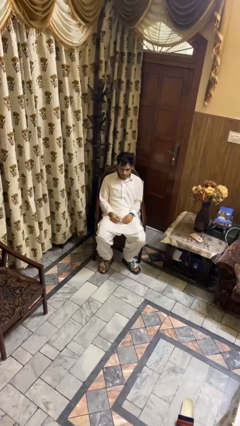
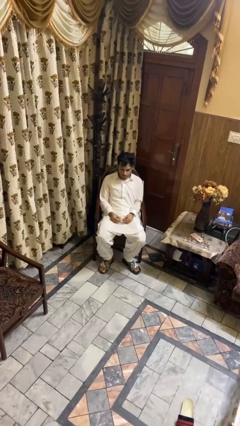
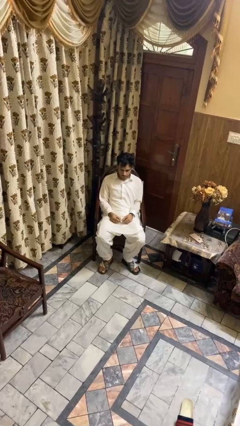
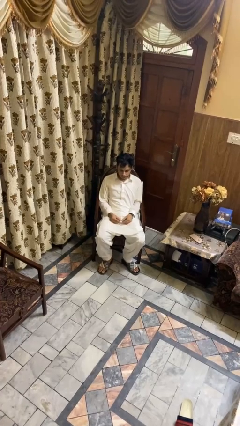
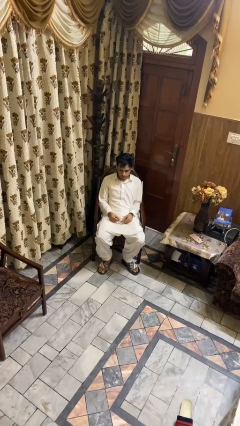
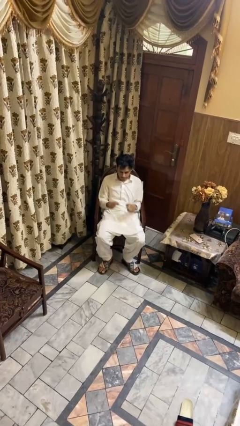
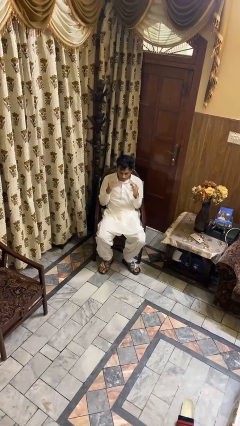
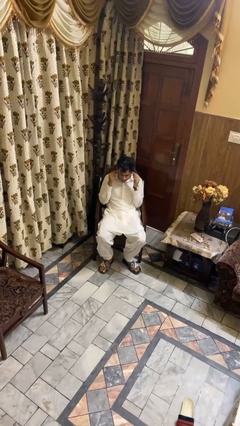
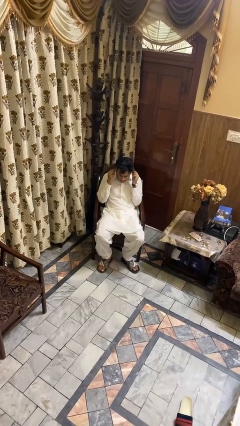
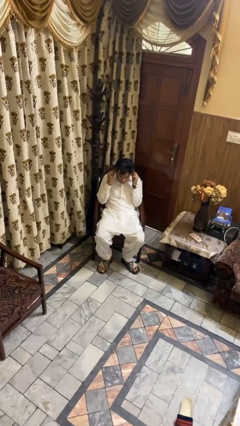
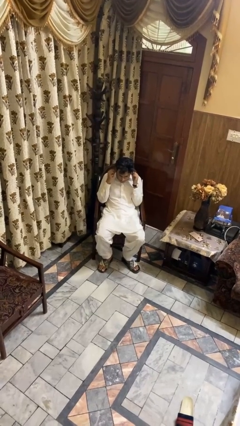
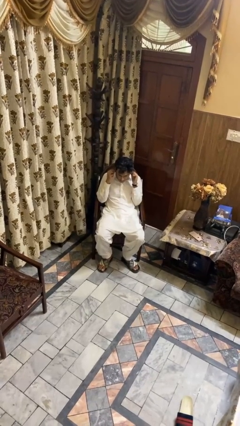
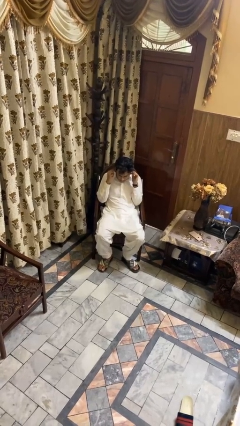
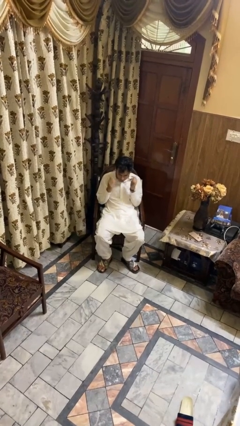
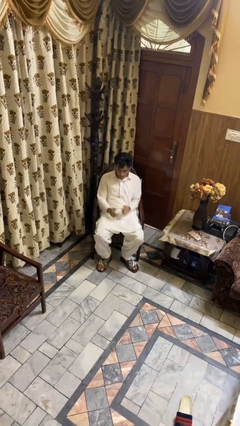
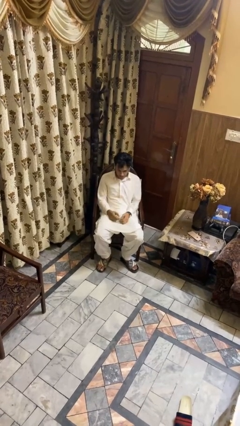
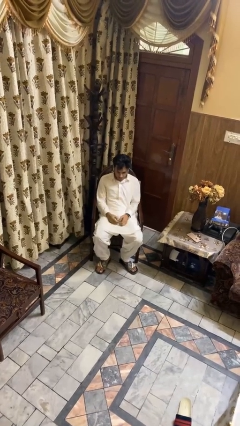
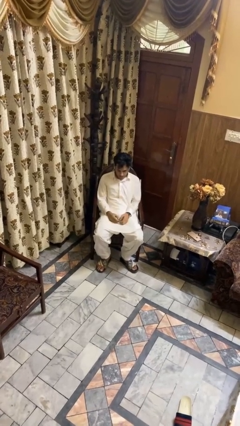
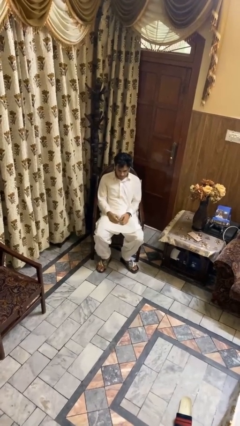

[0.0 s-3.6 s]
person puts on headphones

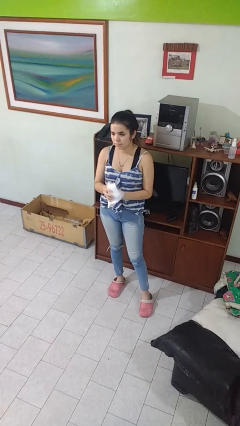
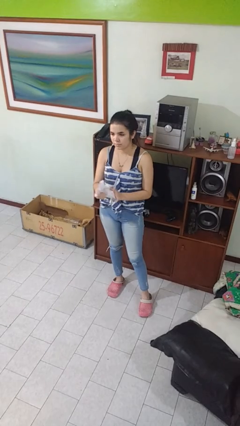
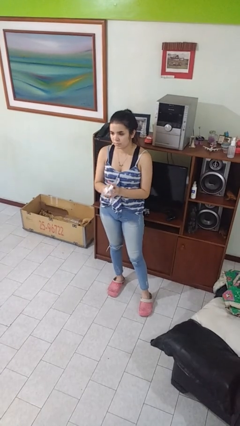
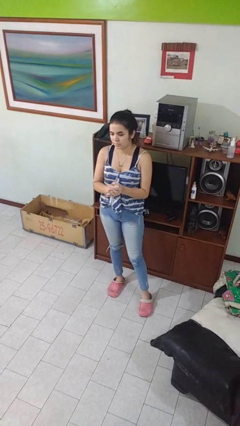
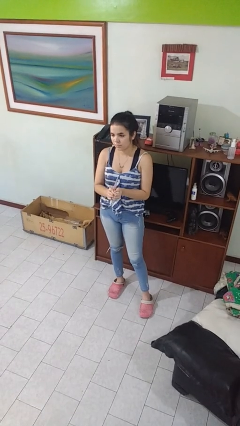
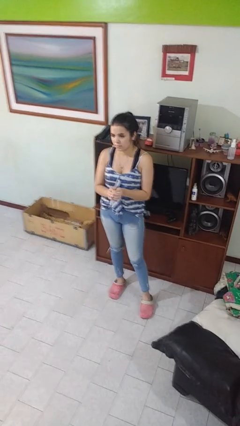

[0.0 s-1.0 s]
person crumples paper

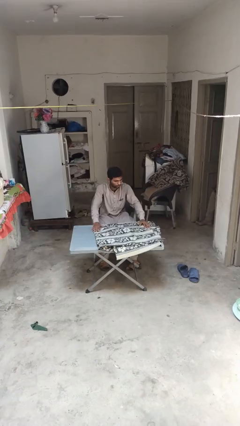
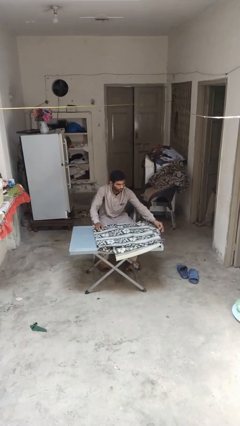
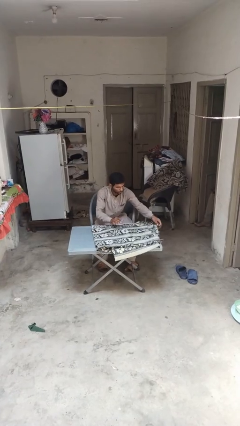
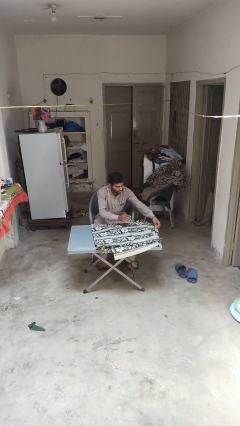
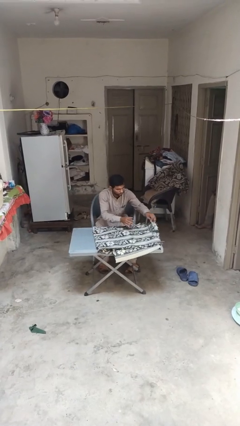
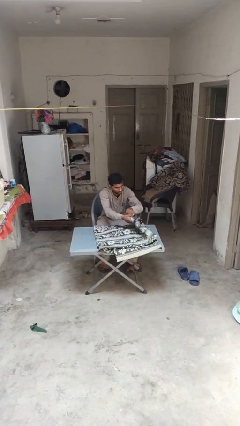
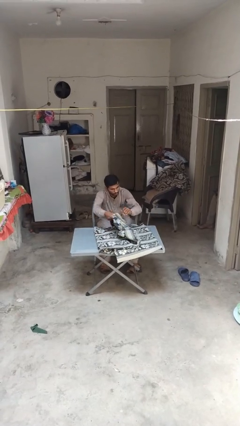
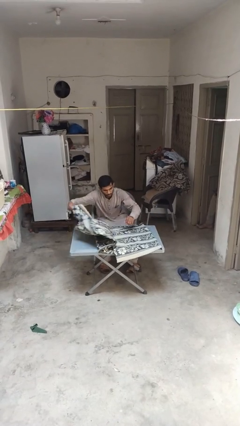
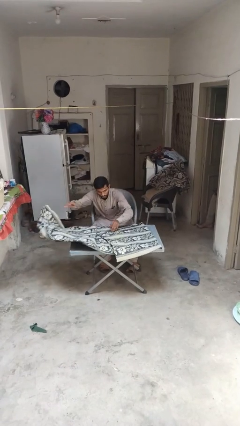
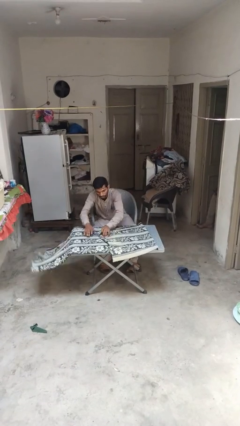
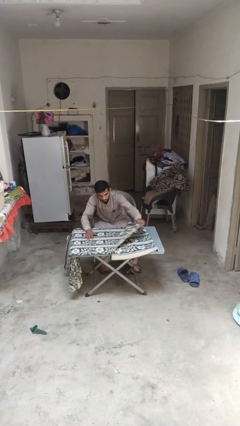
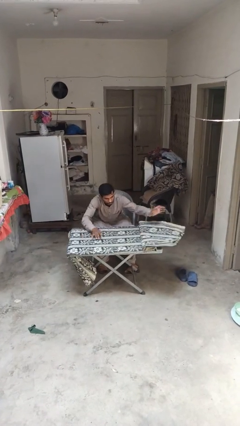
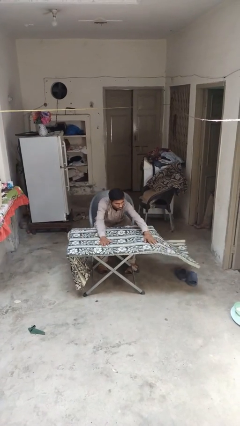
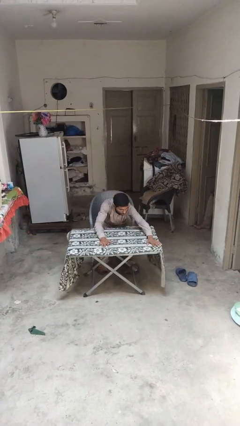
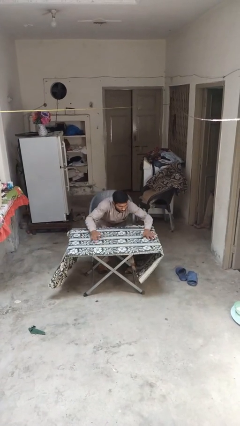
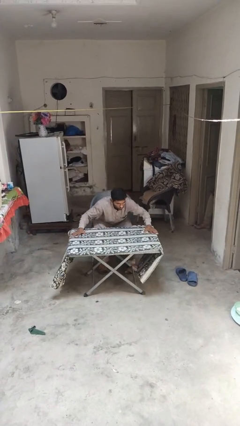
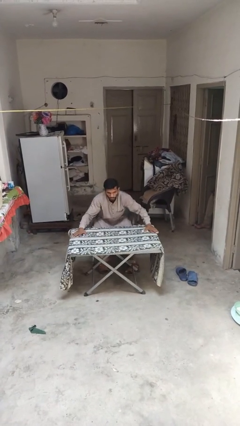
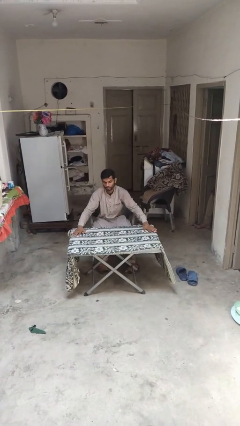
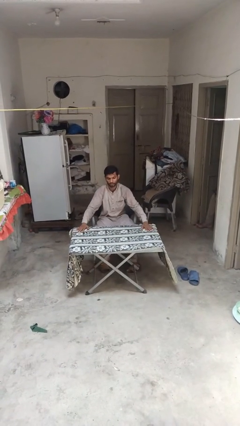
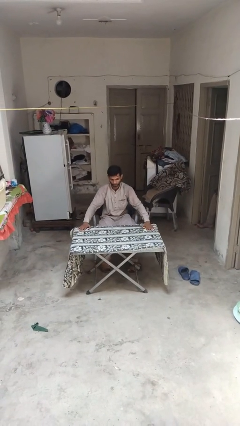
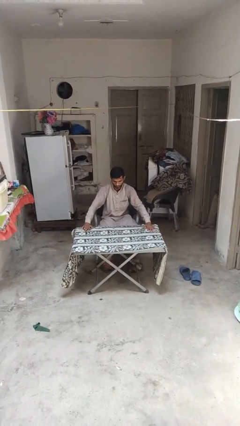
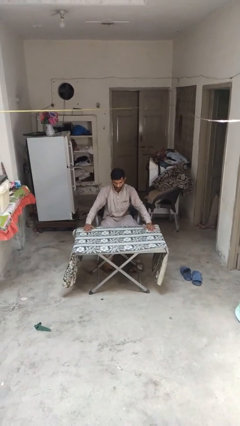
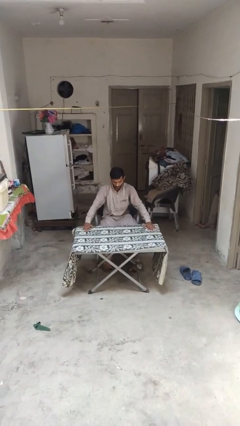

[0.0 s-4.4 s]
person spreads tablecloth

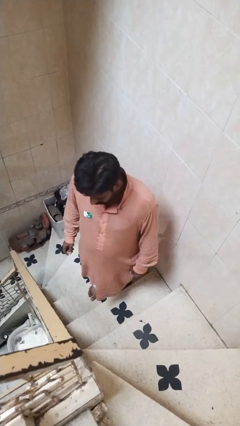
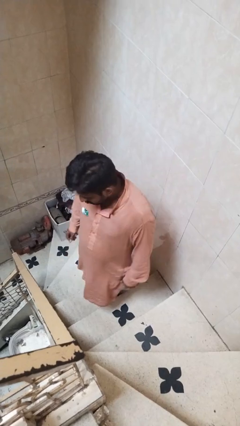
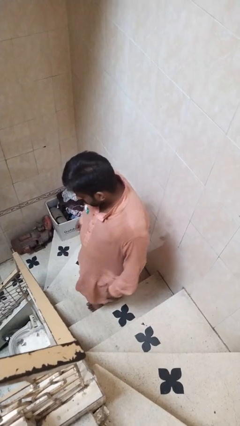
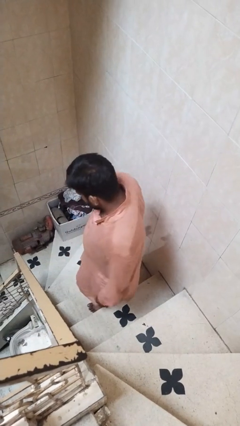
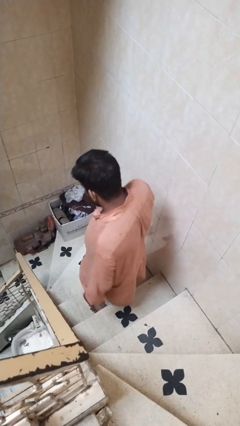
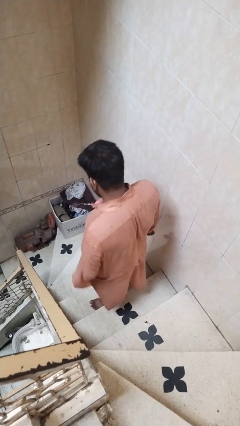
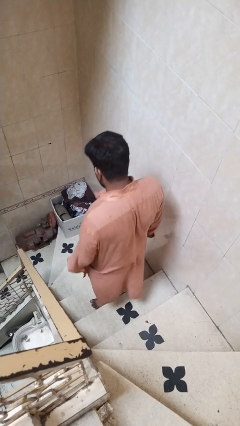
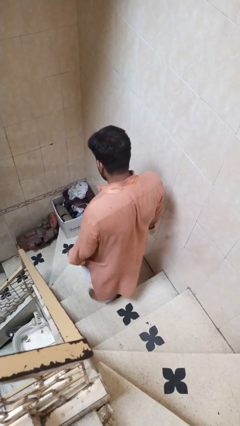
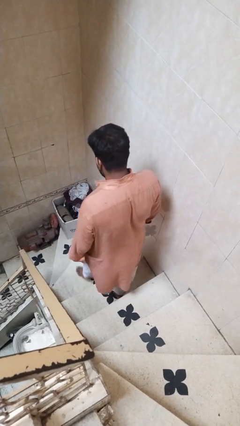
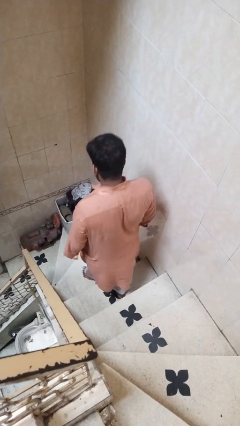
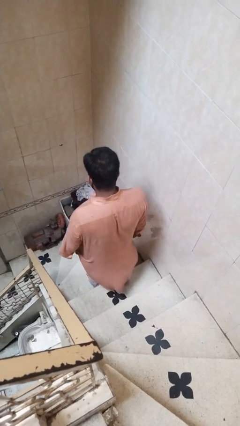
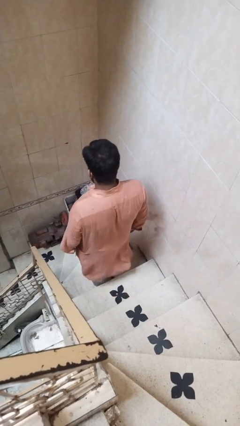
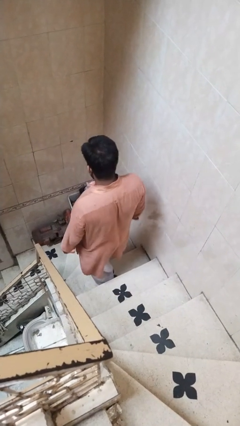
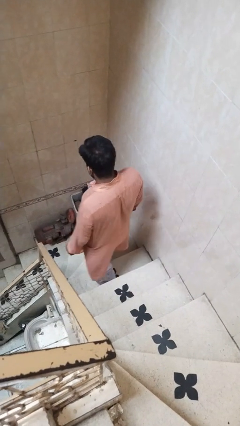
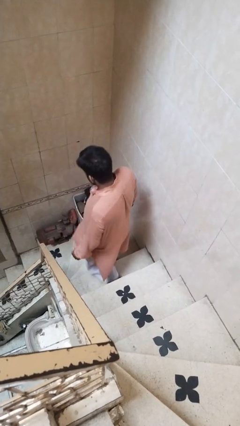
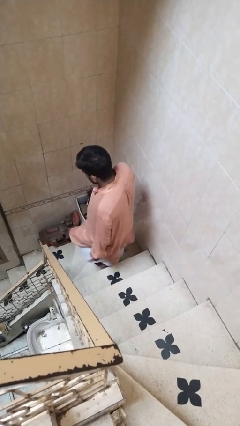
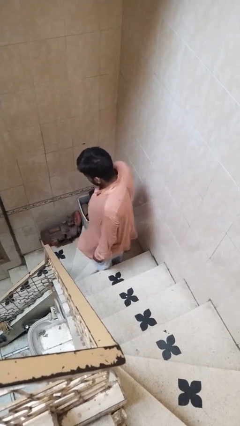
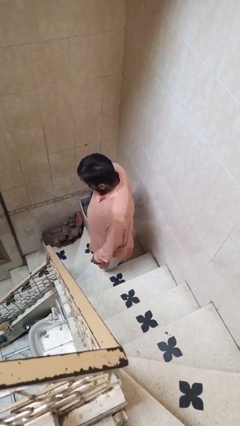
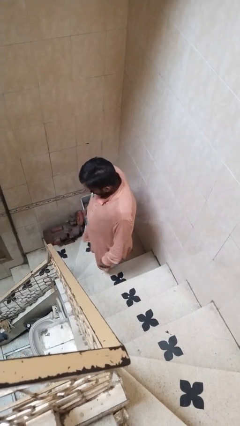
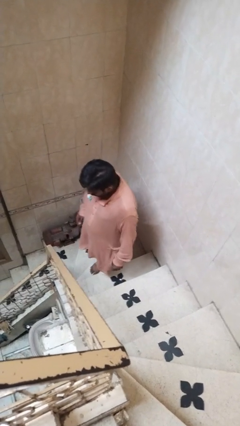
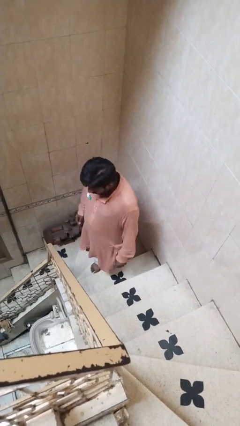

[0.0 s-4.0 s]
person climbs down stairs

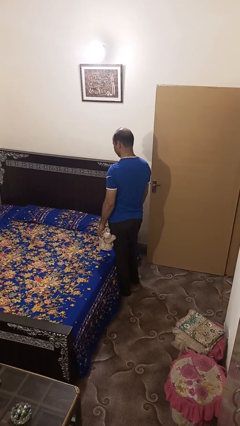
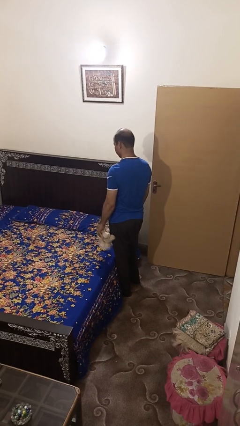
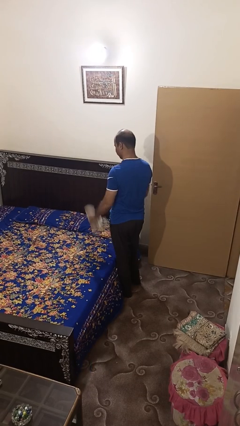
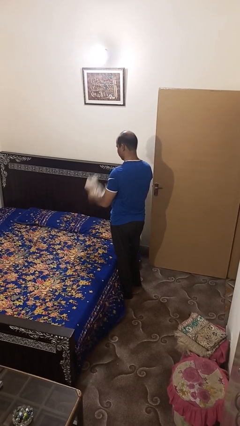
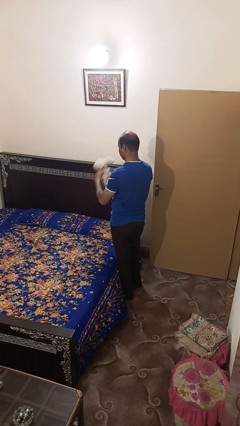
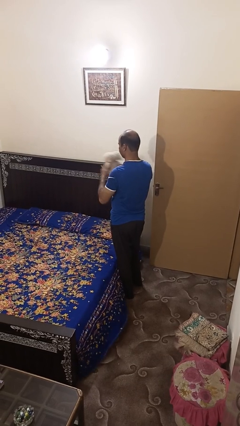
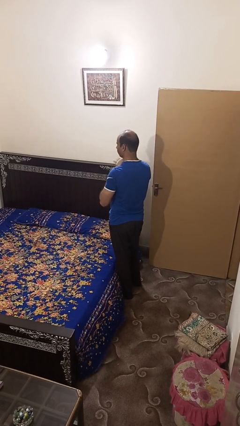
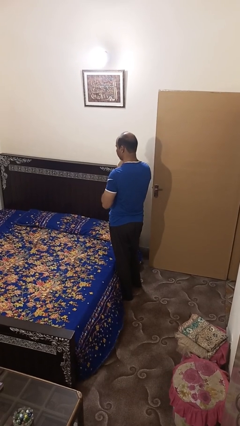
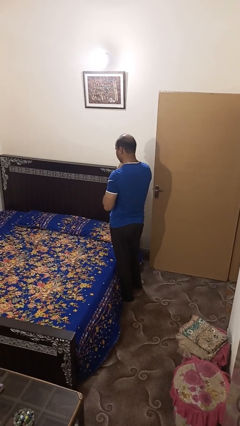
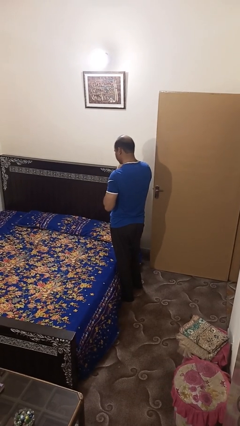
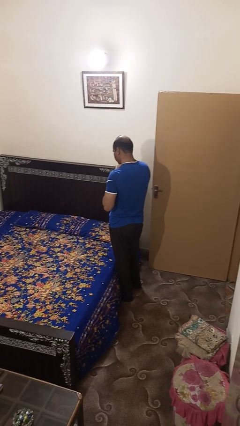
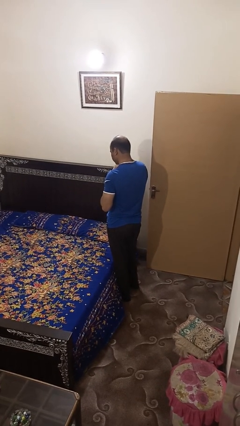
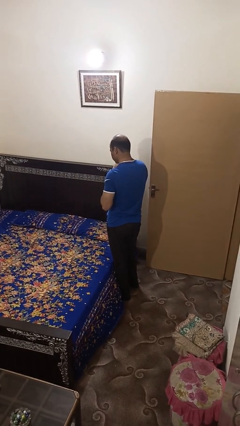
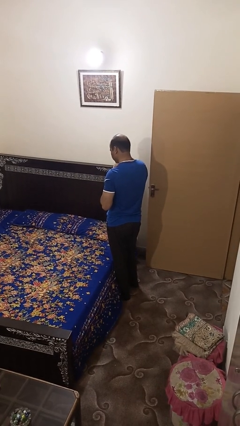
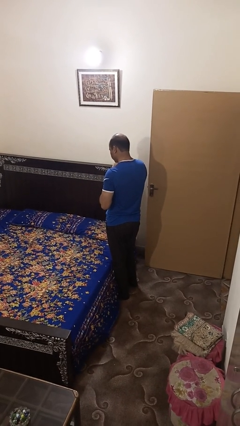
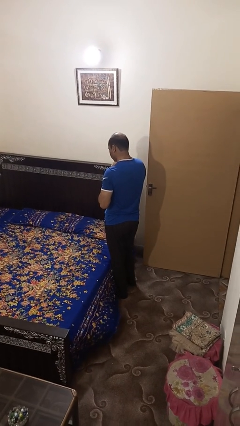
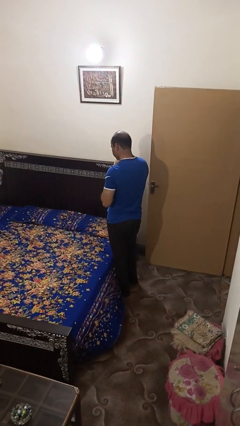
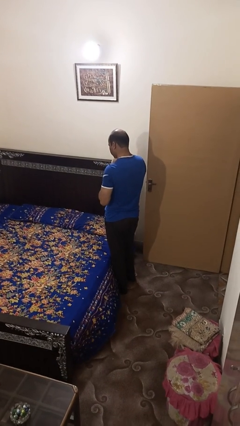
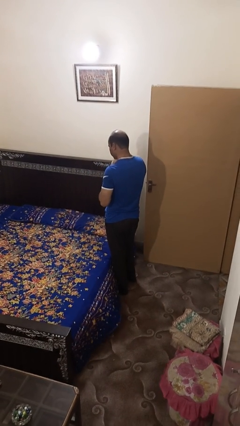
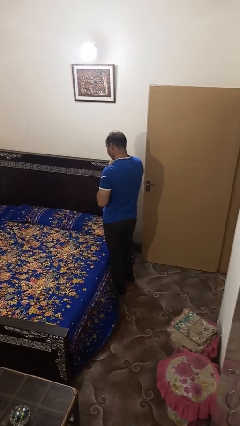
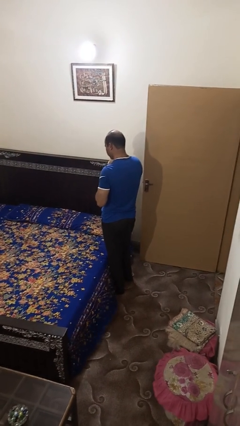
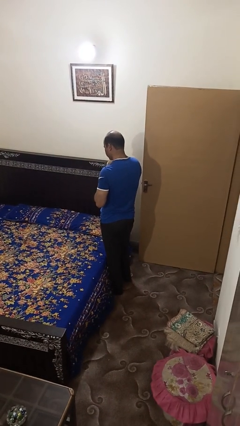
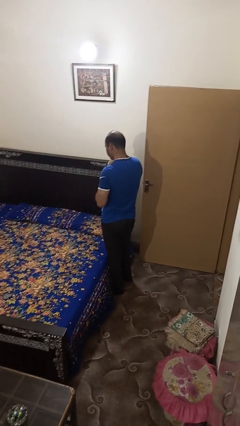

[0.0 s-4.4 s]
person hugs stuffed animal
